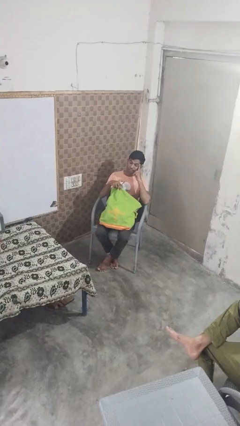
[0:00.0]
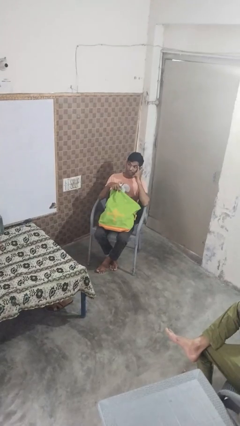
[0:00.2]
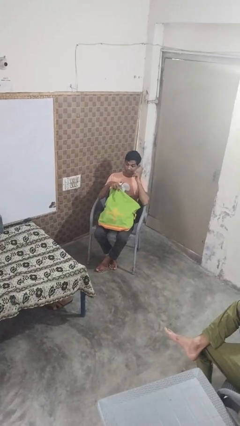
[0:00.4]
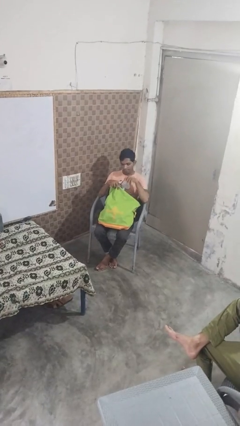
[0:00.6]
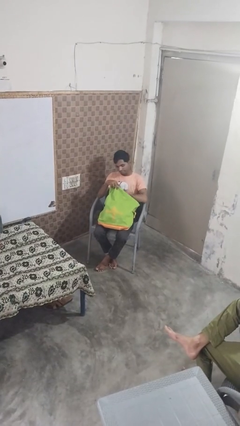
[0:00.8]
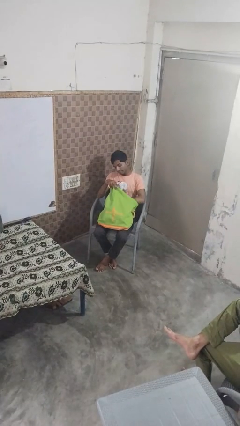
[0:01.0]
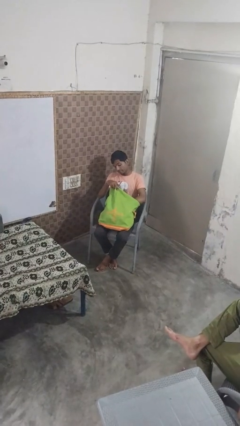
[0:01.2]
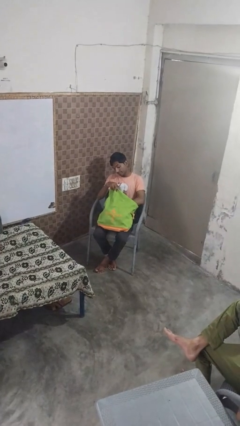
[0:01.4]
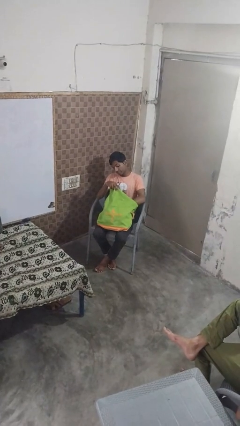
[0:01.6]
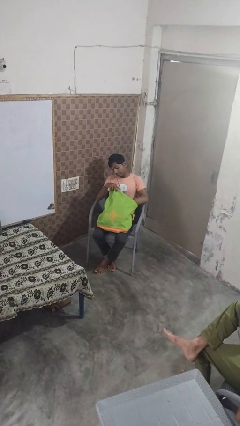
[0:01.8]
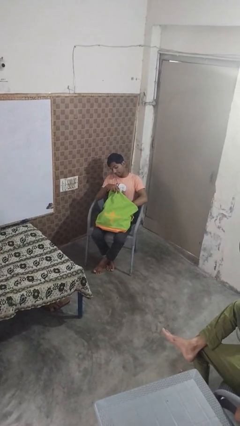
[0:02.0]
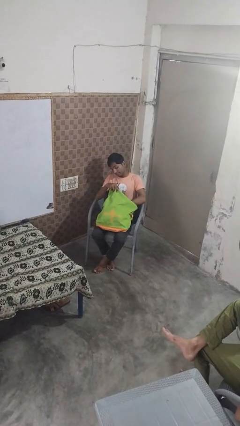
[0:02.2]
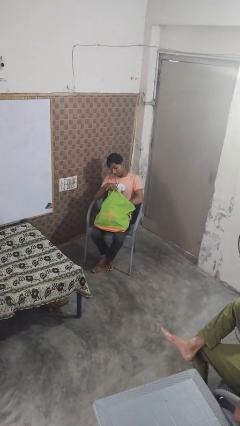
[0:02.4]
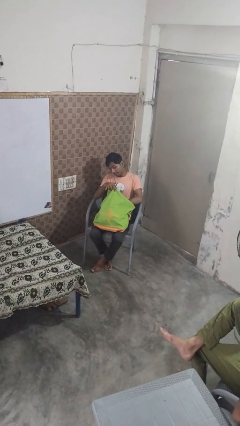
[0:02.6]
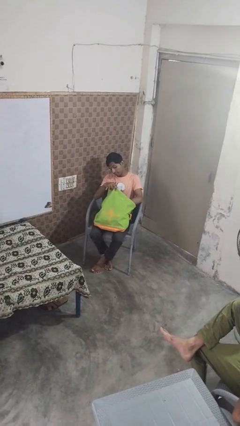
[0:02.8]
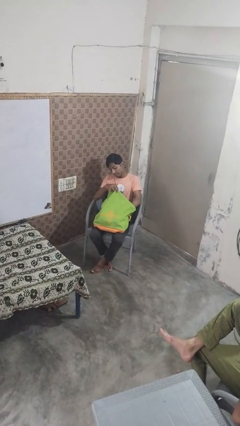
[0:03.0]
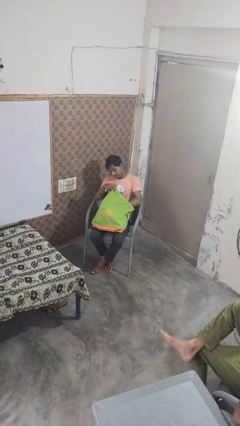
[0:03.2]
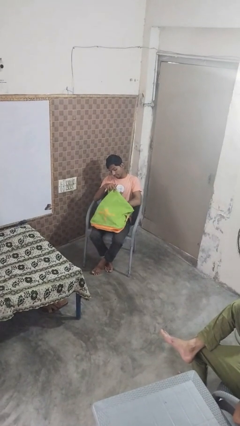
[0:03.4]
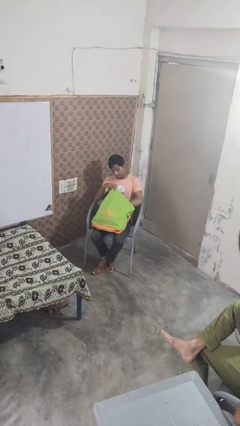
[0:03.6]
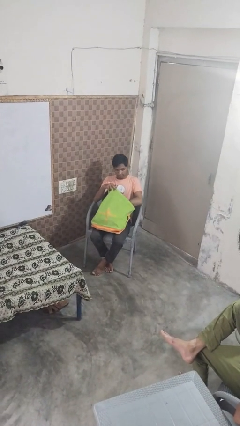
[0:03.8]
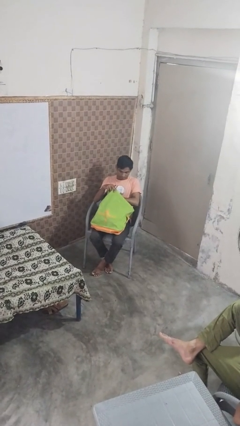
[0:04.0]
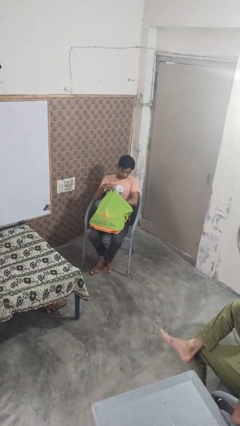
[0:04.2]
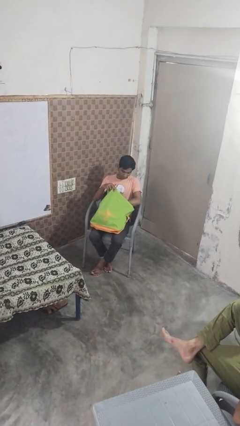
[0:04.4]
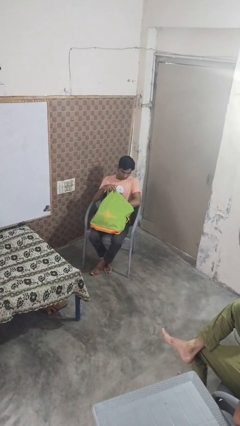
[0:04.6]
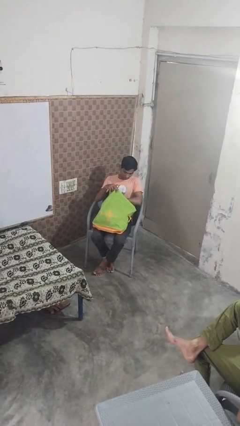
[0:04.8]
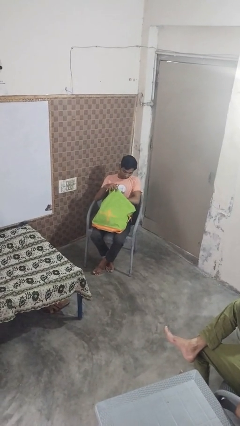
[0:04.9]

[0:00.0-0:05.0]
person searches in bag

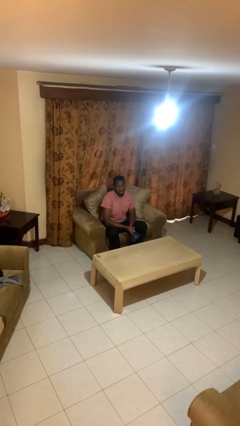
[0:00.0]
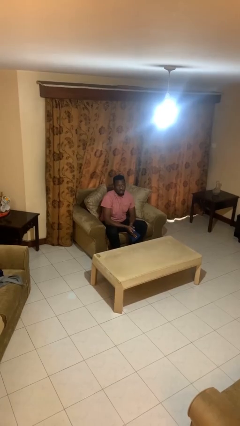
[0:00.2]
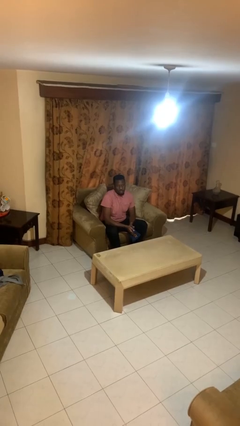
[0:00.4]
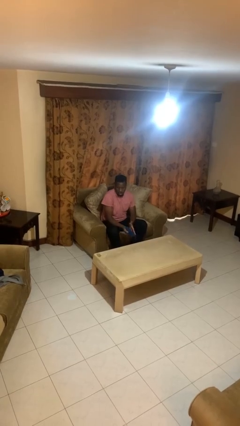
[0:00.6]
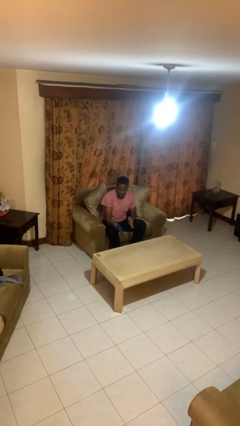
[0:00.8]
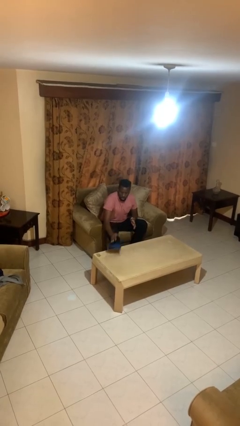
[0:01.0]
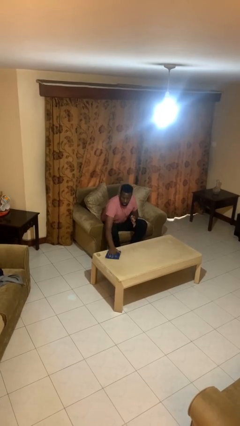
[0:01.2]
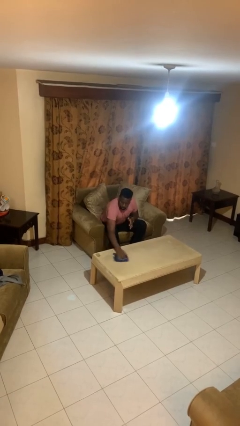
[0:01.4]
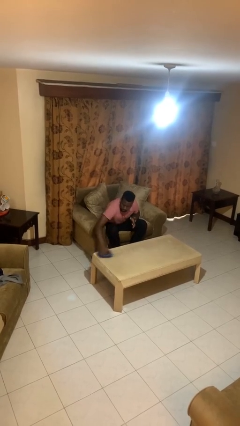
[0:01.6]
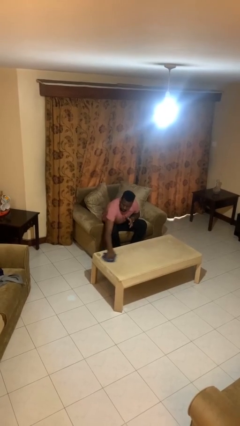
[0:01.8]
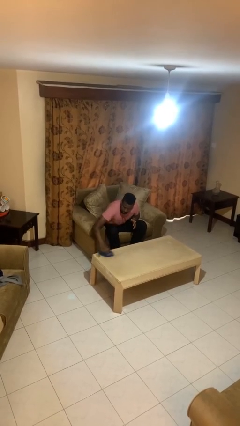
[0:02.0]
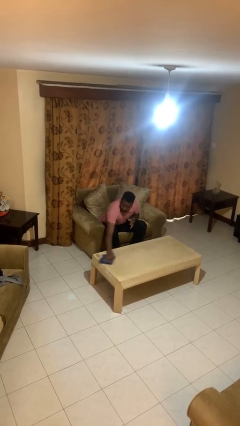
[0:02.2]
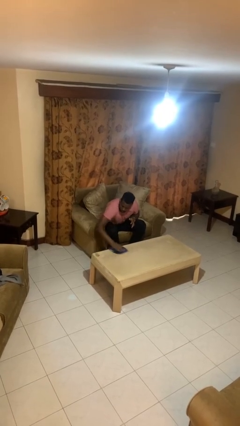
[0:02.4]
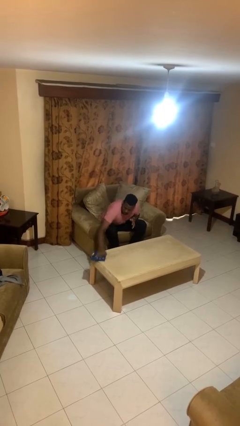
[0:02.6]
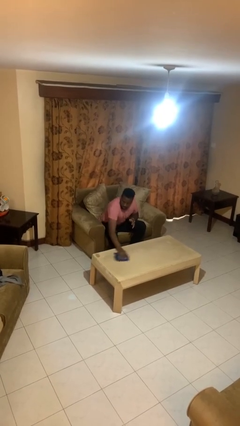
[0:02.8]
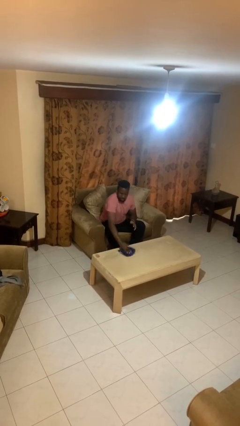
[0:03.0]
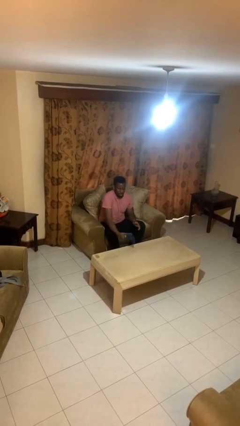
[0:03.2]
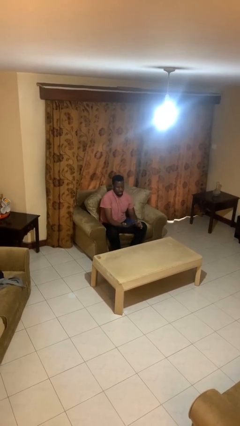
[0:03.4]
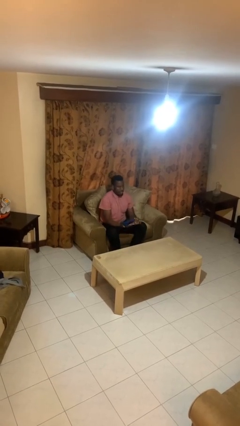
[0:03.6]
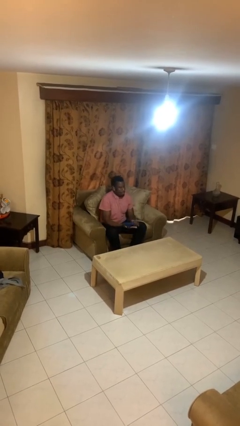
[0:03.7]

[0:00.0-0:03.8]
person cleans table with rag

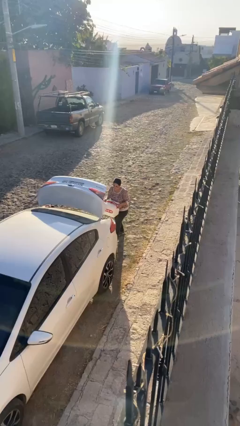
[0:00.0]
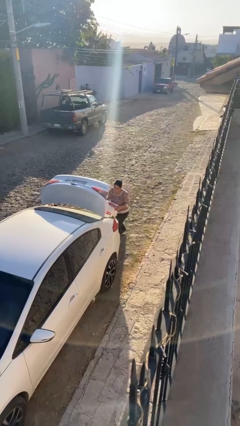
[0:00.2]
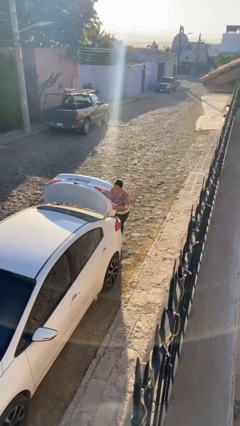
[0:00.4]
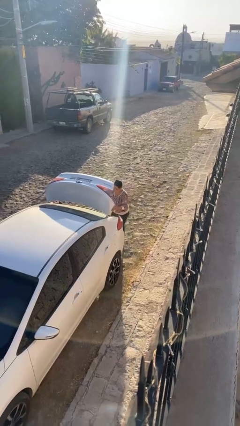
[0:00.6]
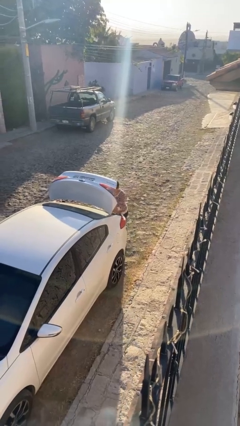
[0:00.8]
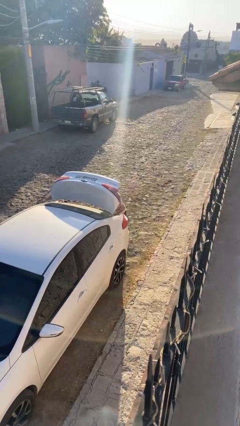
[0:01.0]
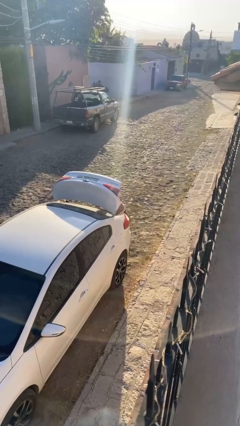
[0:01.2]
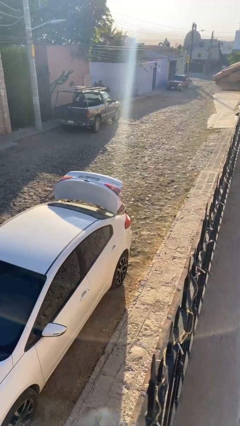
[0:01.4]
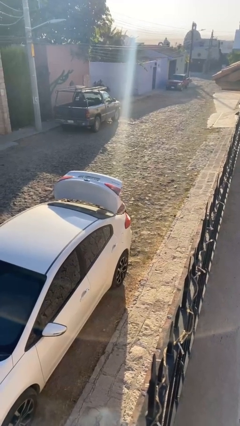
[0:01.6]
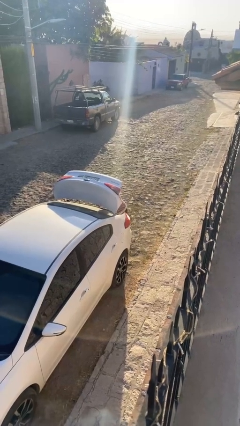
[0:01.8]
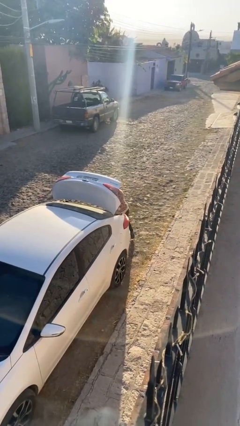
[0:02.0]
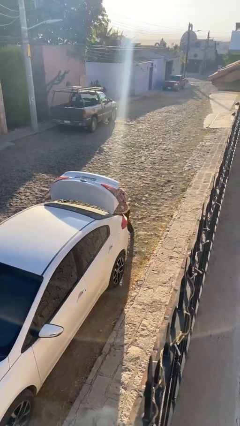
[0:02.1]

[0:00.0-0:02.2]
person loads car

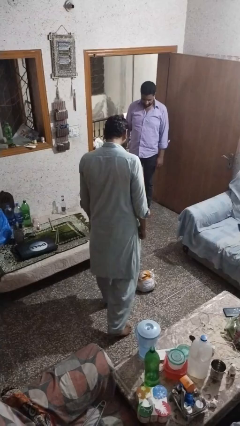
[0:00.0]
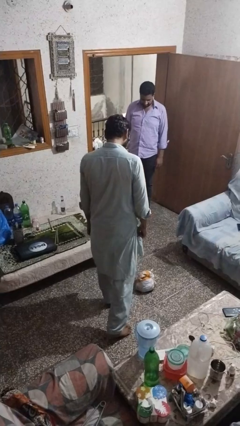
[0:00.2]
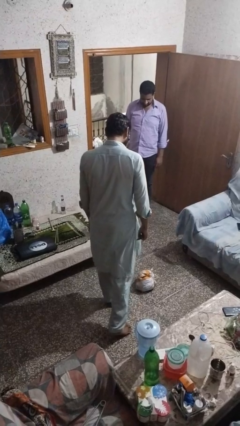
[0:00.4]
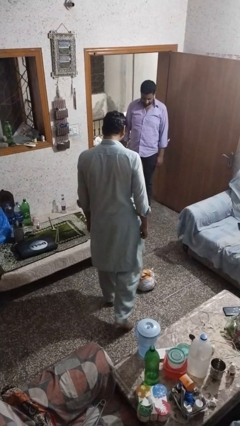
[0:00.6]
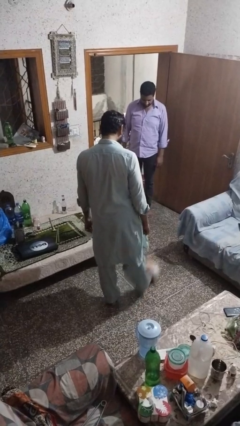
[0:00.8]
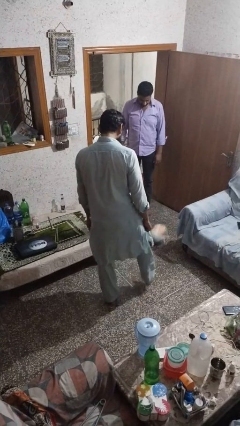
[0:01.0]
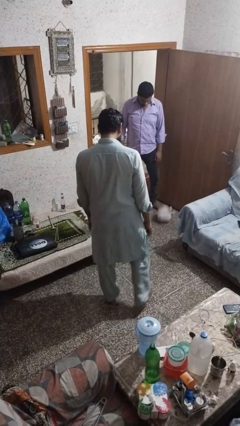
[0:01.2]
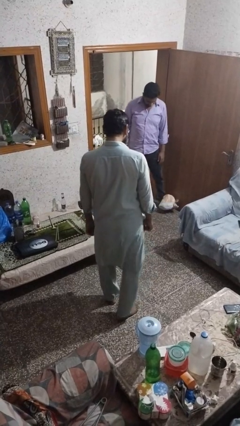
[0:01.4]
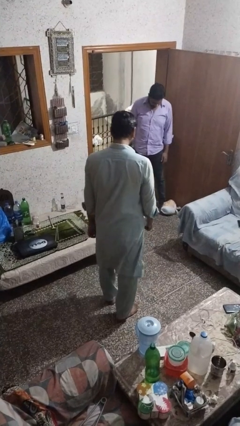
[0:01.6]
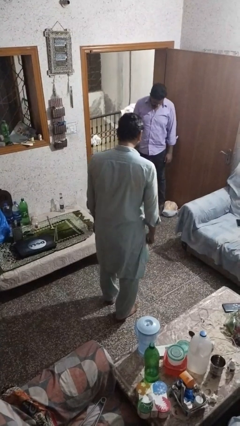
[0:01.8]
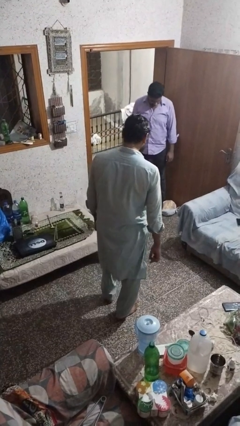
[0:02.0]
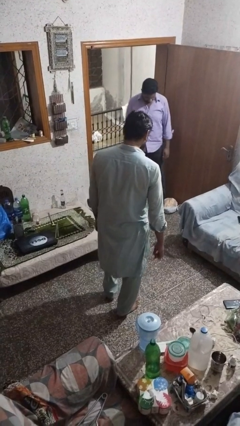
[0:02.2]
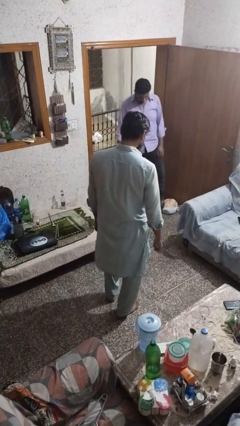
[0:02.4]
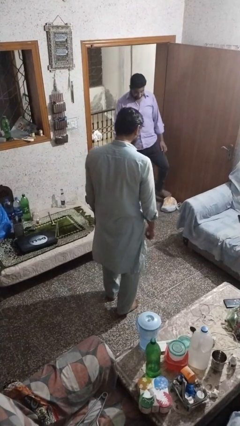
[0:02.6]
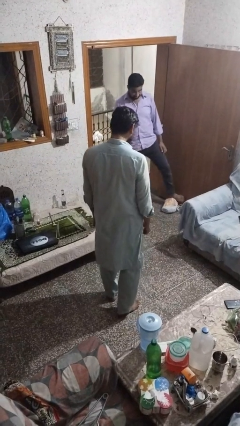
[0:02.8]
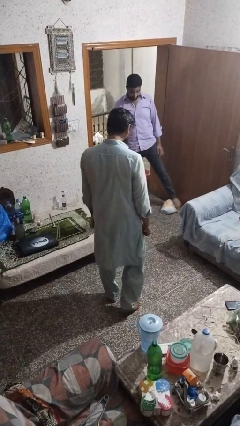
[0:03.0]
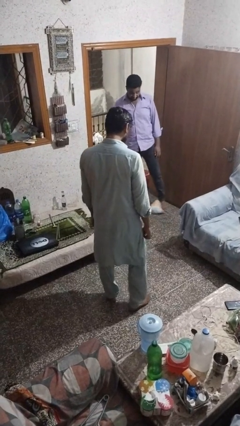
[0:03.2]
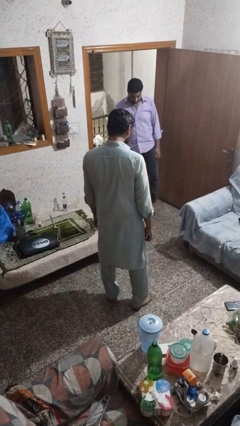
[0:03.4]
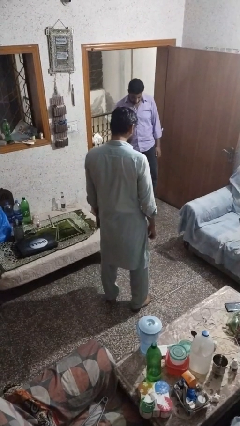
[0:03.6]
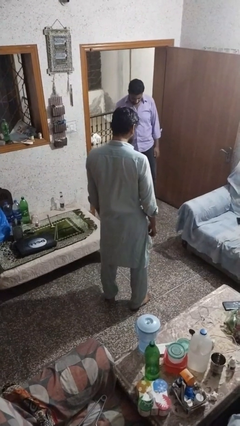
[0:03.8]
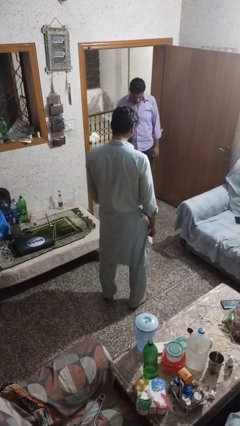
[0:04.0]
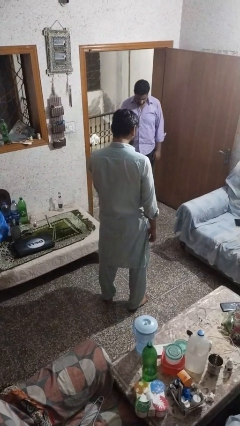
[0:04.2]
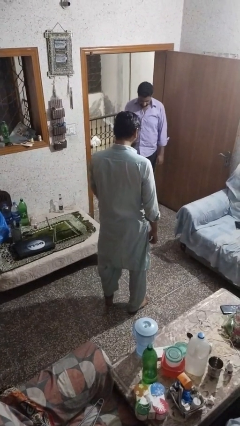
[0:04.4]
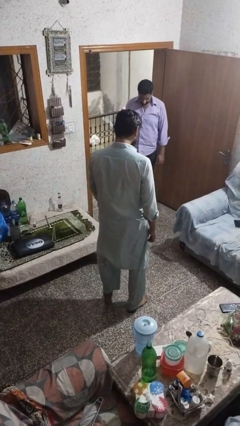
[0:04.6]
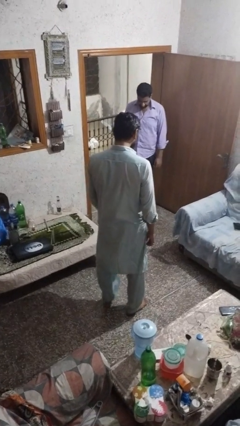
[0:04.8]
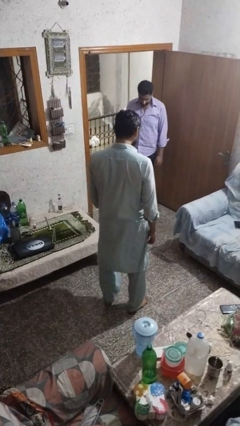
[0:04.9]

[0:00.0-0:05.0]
person kicks object to person

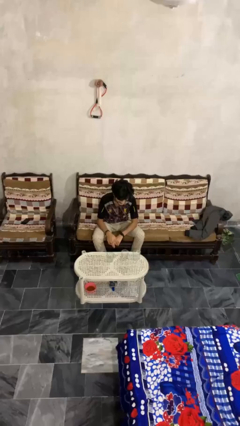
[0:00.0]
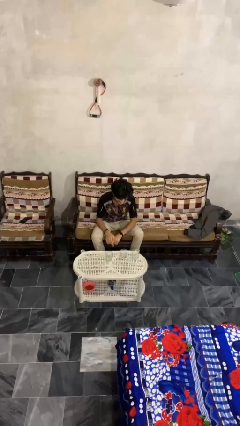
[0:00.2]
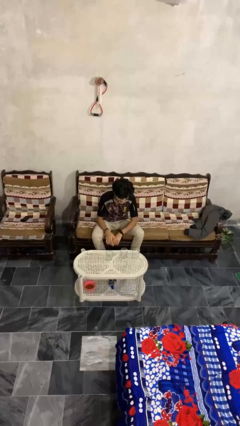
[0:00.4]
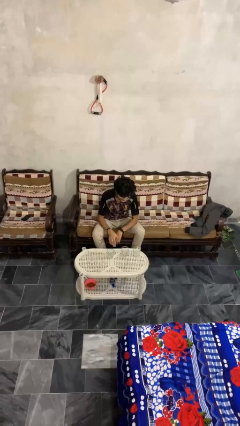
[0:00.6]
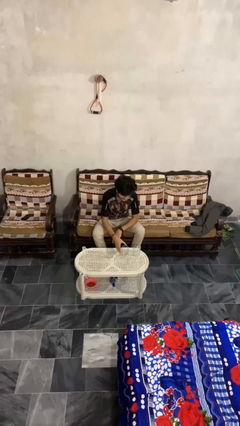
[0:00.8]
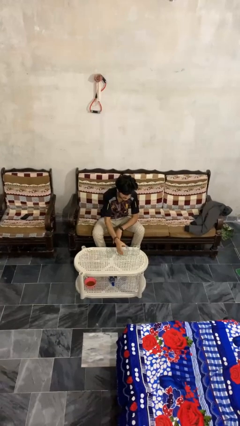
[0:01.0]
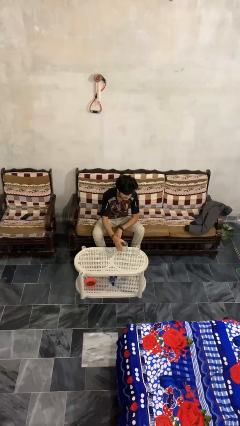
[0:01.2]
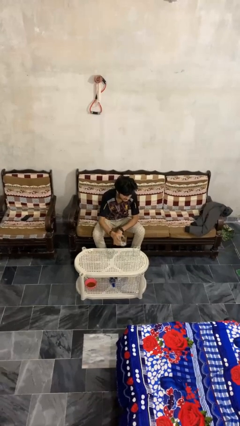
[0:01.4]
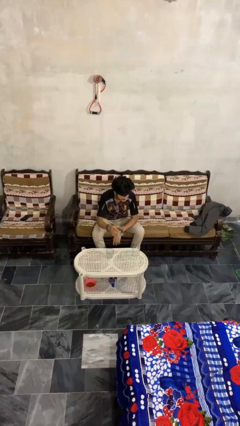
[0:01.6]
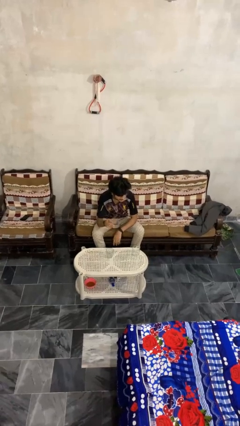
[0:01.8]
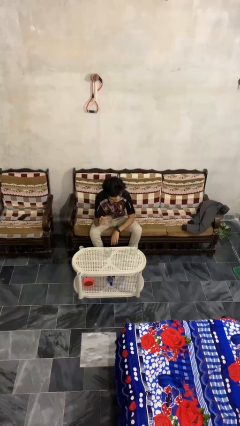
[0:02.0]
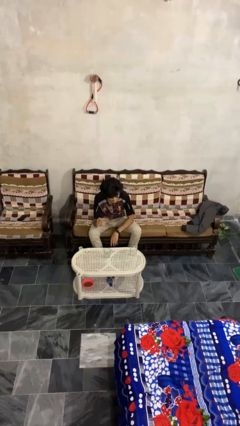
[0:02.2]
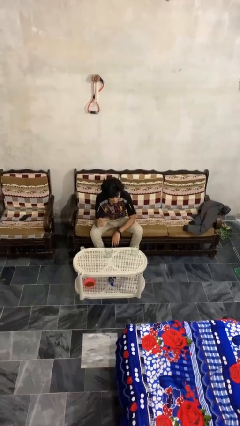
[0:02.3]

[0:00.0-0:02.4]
person picks up object from table
